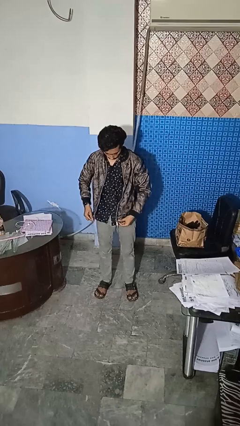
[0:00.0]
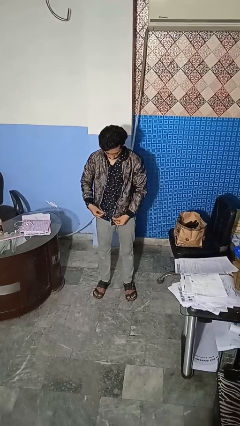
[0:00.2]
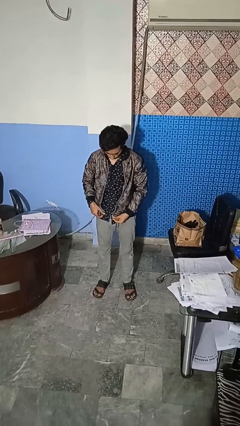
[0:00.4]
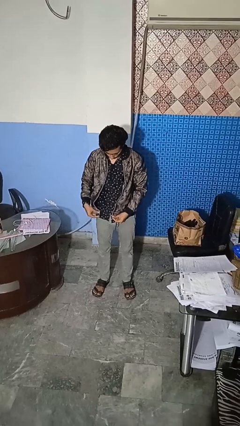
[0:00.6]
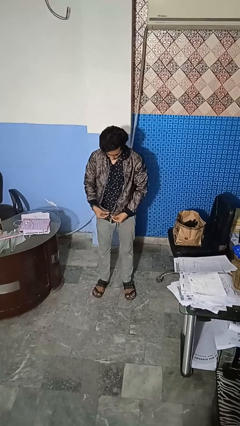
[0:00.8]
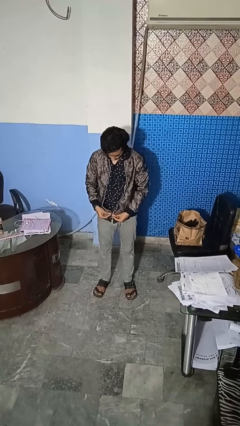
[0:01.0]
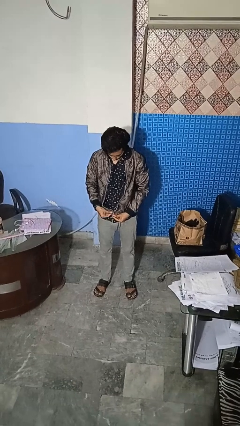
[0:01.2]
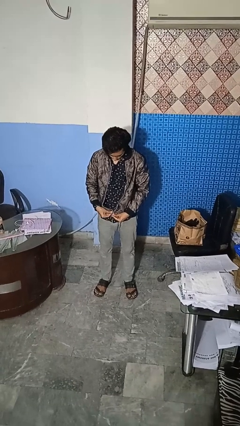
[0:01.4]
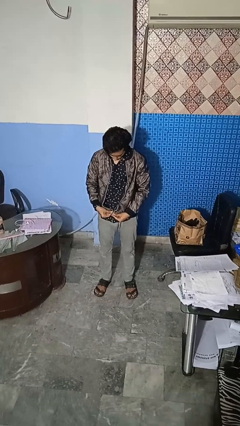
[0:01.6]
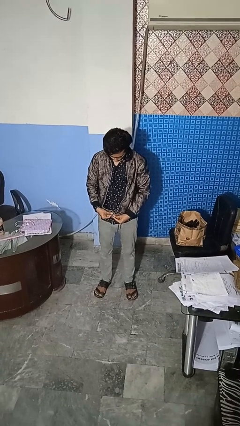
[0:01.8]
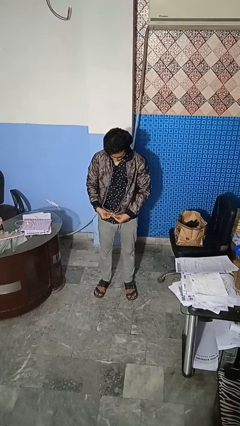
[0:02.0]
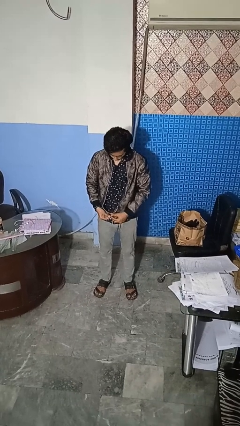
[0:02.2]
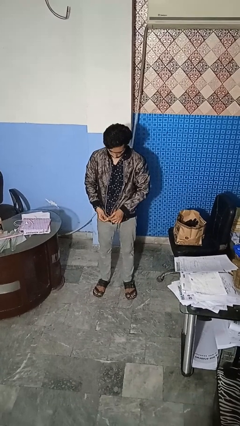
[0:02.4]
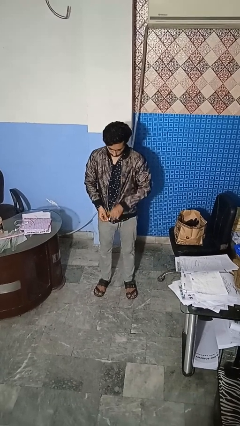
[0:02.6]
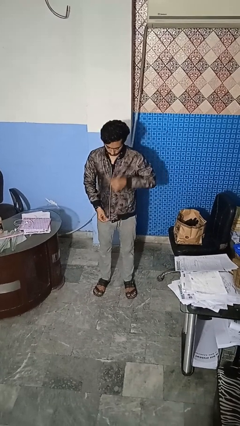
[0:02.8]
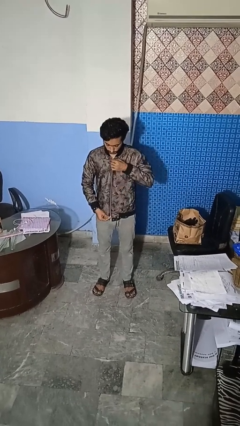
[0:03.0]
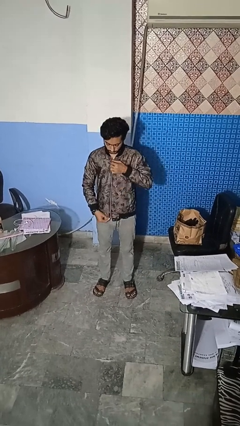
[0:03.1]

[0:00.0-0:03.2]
person zips up jacket

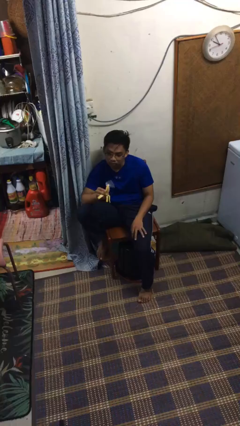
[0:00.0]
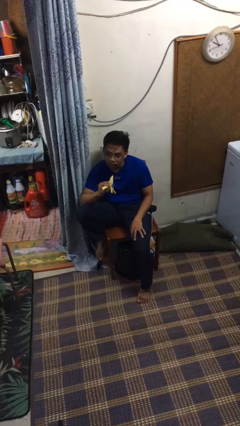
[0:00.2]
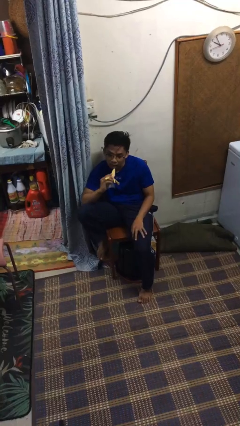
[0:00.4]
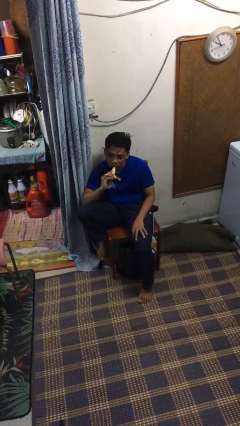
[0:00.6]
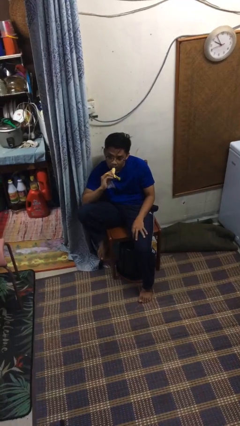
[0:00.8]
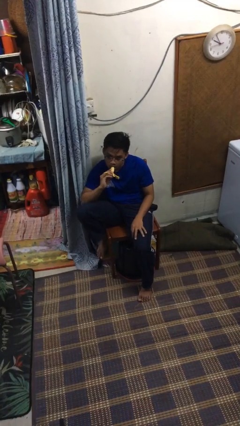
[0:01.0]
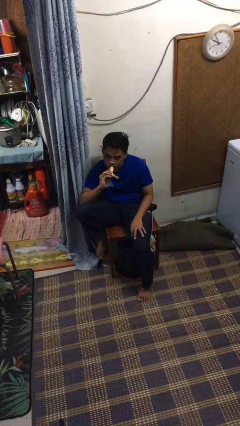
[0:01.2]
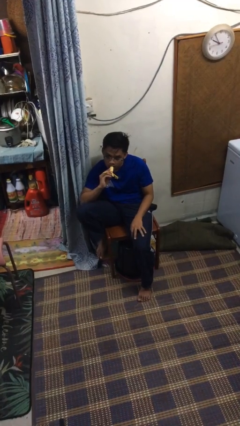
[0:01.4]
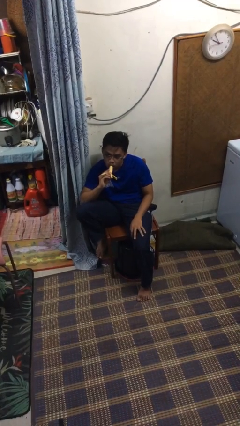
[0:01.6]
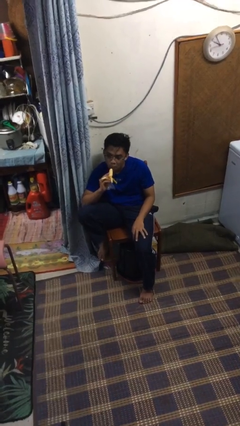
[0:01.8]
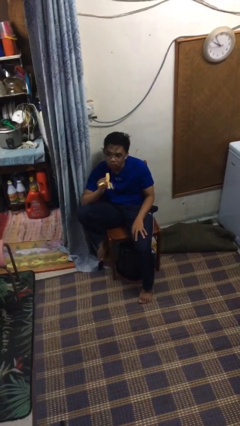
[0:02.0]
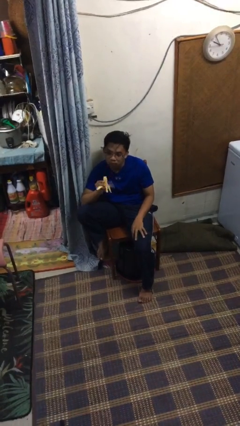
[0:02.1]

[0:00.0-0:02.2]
person eats banana

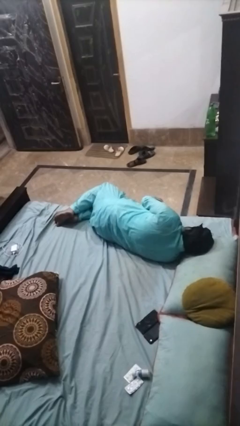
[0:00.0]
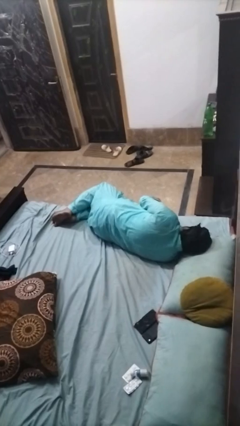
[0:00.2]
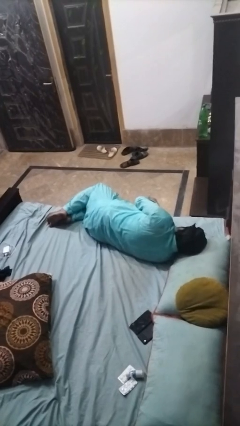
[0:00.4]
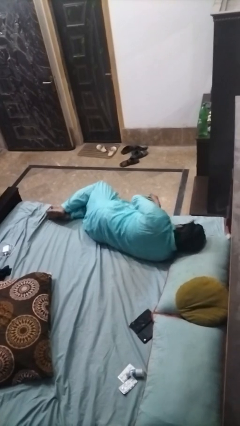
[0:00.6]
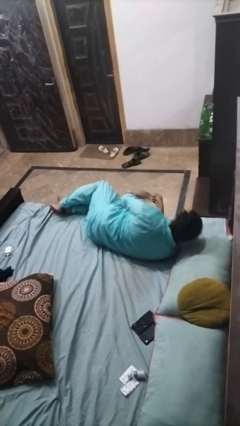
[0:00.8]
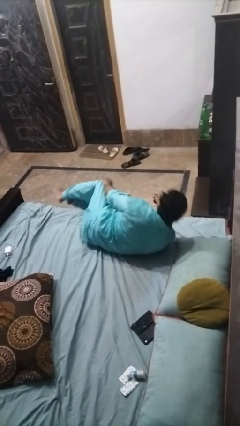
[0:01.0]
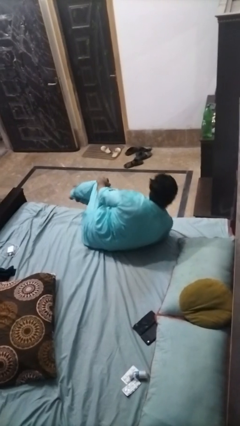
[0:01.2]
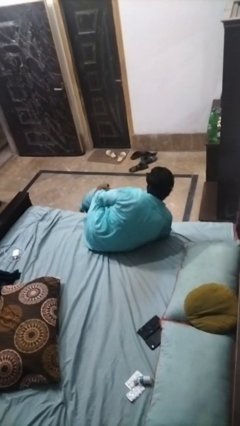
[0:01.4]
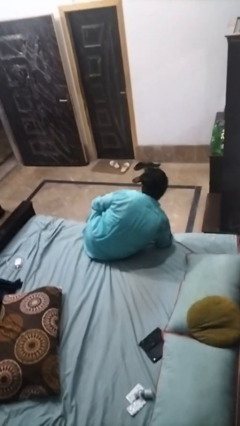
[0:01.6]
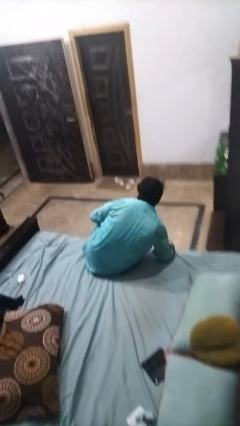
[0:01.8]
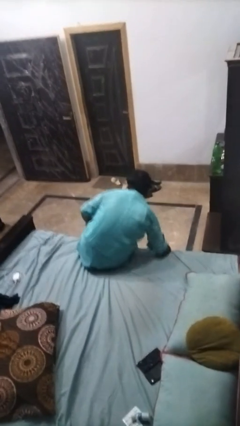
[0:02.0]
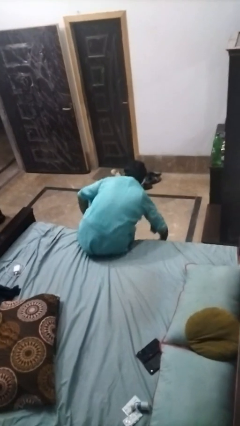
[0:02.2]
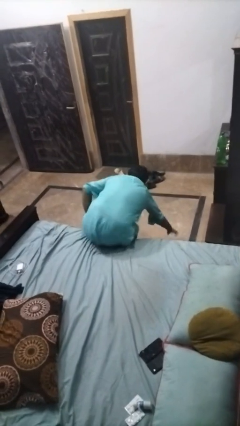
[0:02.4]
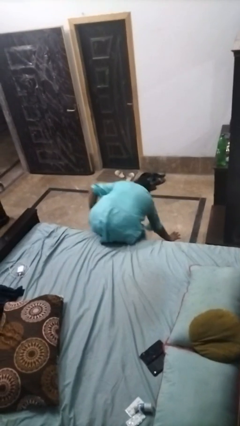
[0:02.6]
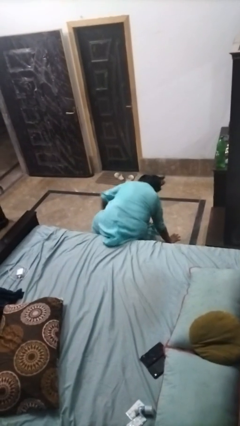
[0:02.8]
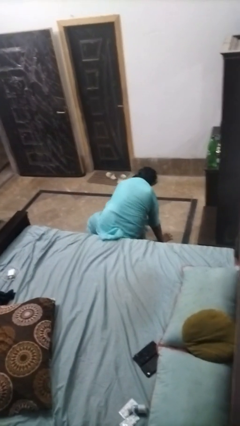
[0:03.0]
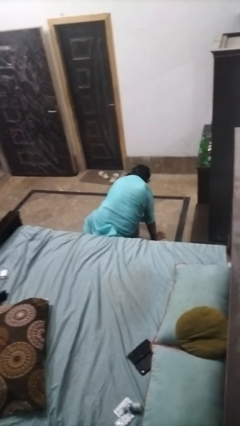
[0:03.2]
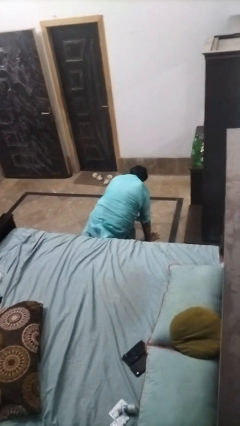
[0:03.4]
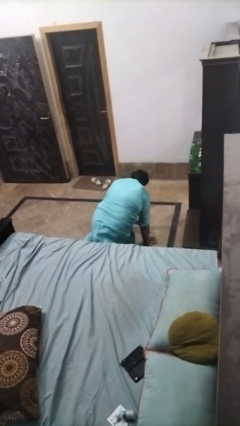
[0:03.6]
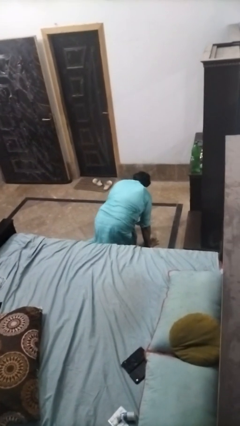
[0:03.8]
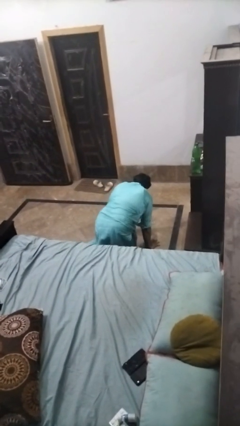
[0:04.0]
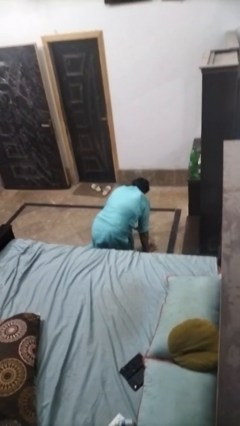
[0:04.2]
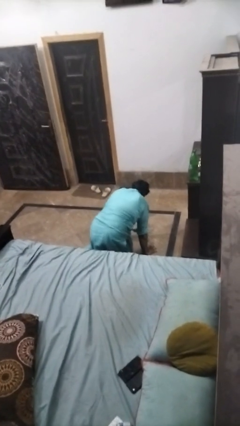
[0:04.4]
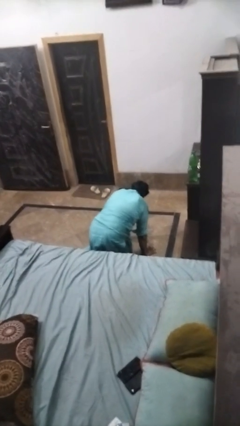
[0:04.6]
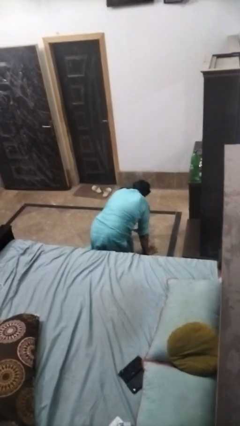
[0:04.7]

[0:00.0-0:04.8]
person falls from bed

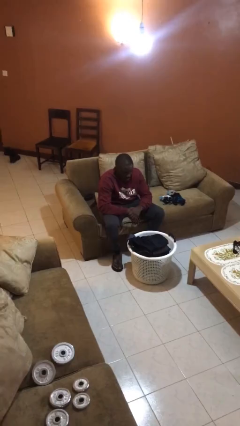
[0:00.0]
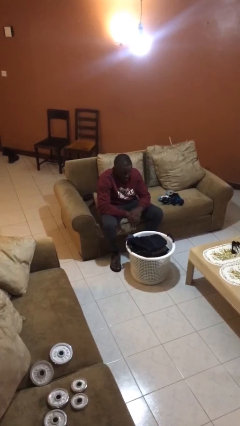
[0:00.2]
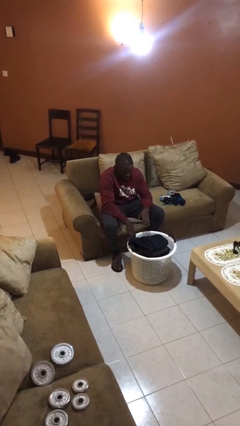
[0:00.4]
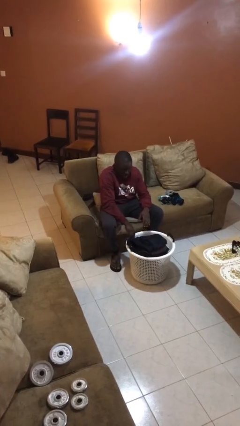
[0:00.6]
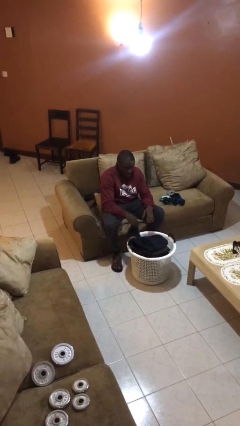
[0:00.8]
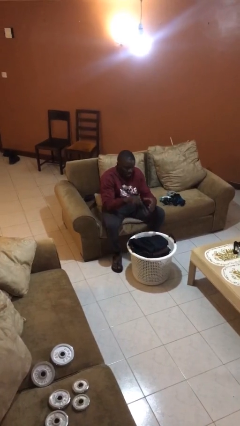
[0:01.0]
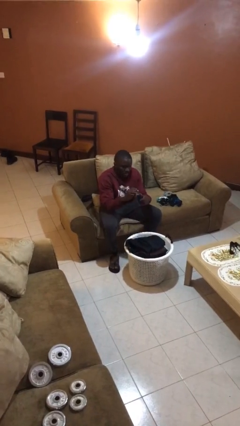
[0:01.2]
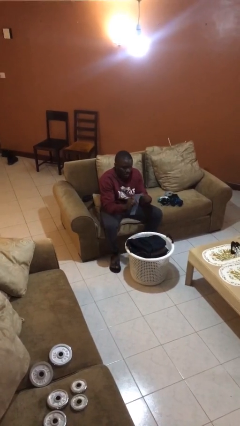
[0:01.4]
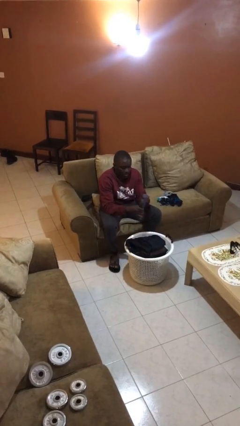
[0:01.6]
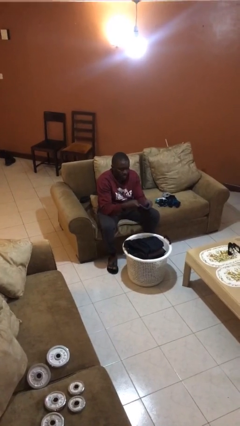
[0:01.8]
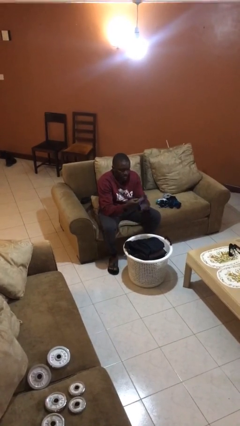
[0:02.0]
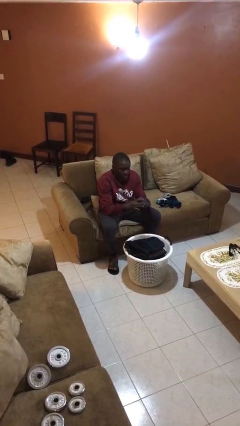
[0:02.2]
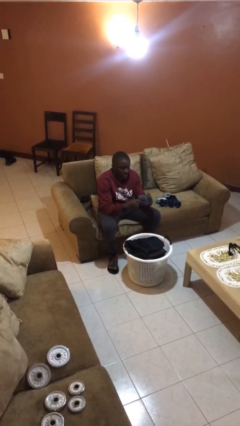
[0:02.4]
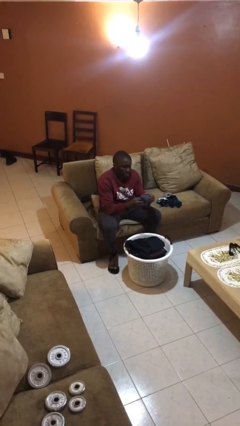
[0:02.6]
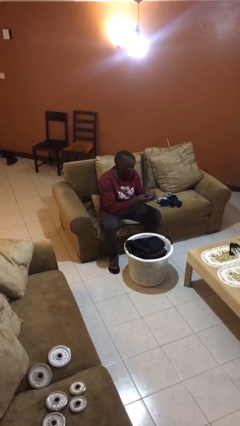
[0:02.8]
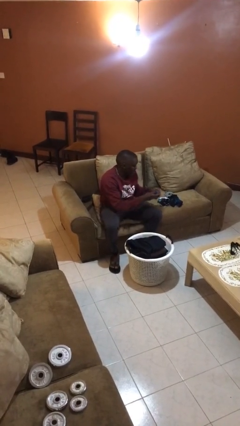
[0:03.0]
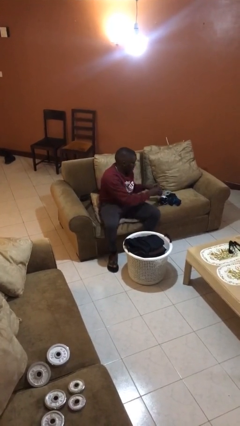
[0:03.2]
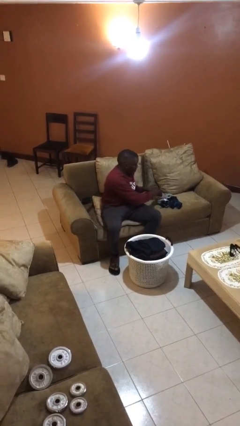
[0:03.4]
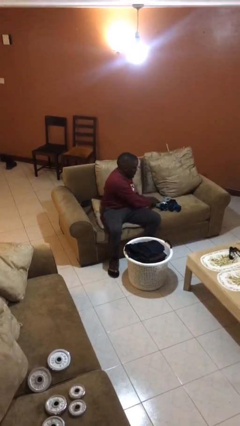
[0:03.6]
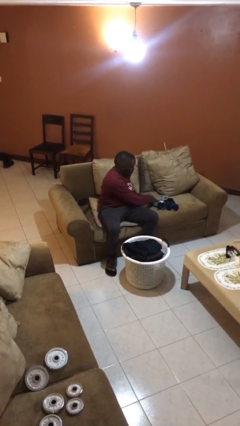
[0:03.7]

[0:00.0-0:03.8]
person folds socks

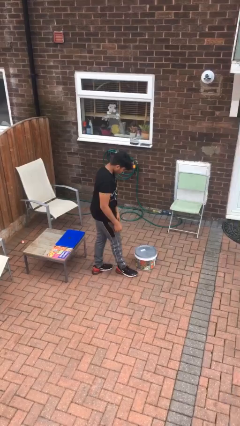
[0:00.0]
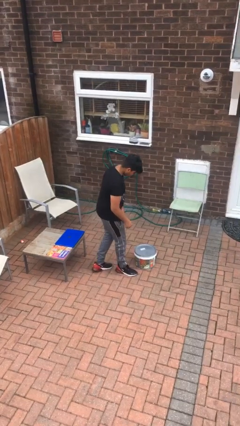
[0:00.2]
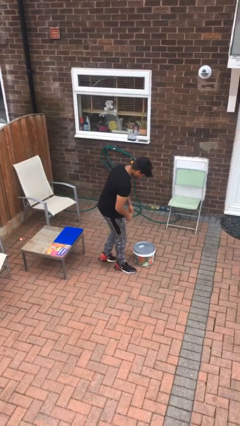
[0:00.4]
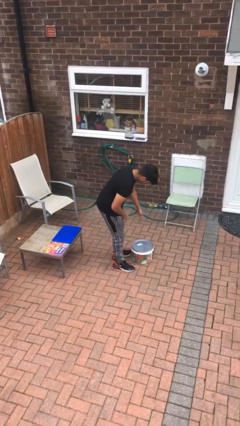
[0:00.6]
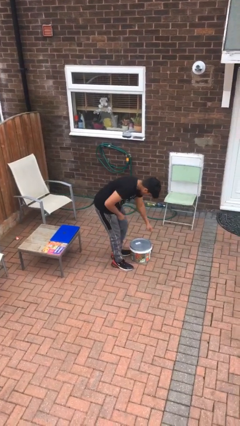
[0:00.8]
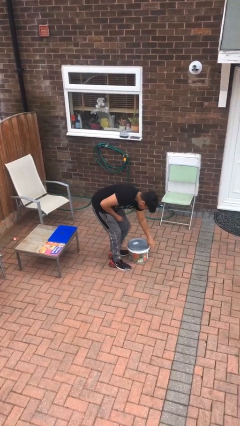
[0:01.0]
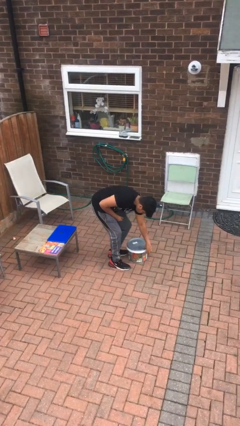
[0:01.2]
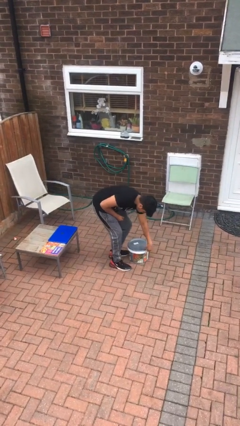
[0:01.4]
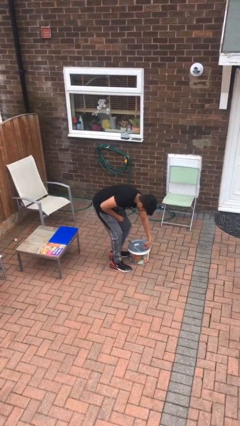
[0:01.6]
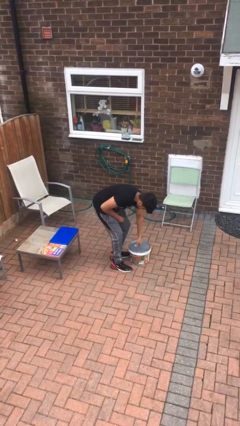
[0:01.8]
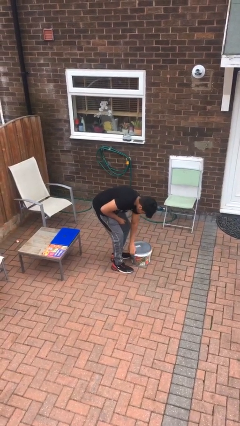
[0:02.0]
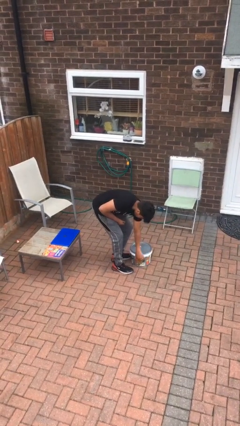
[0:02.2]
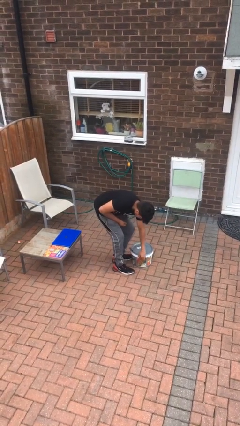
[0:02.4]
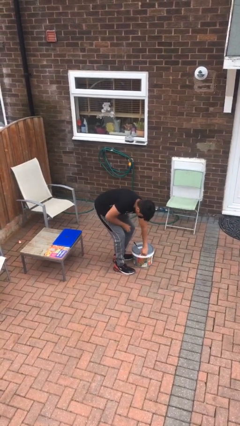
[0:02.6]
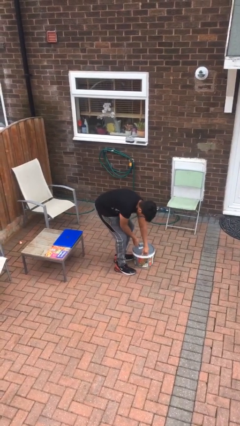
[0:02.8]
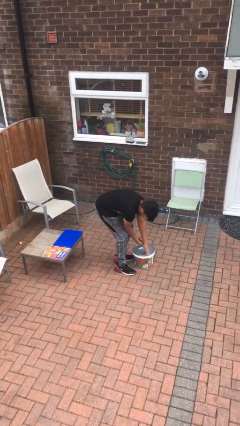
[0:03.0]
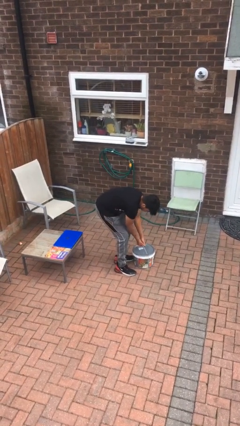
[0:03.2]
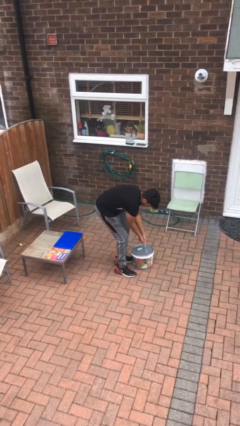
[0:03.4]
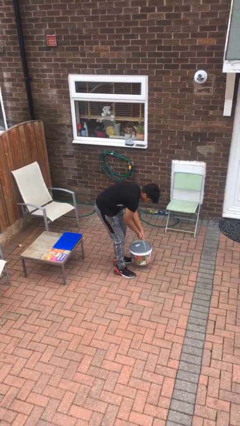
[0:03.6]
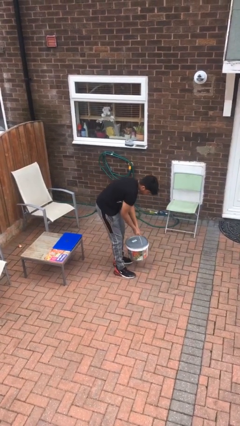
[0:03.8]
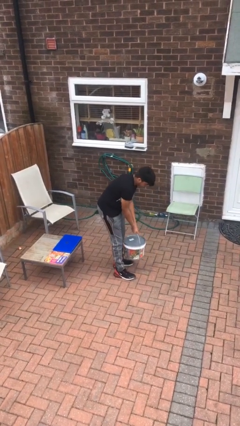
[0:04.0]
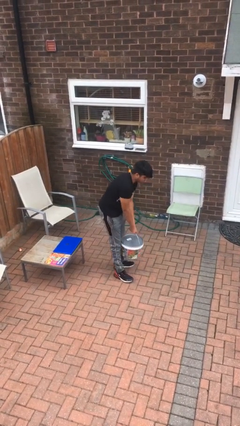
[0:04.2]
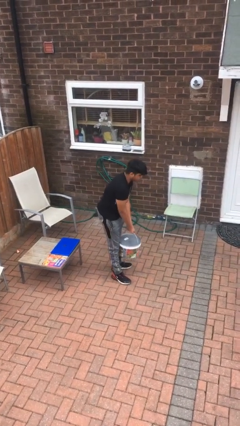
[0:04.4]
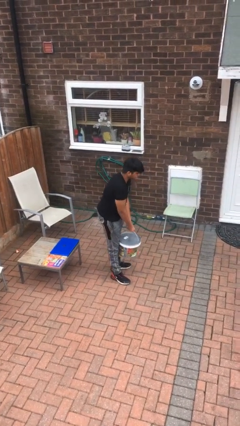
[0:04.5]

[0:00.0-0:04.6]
person picks up object from floor
